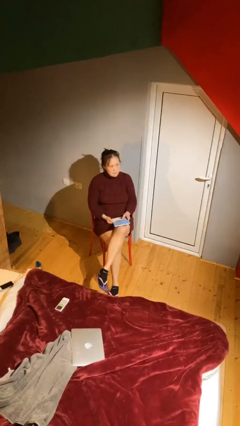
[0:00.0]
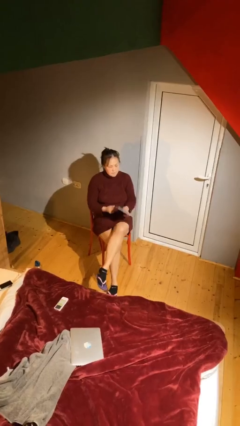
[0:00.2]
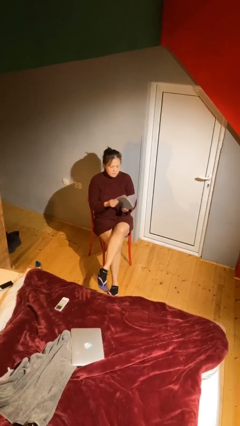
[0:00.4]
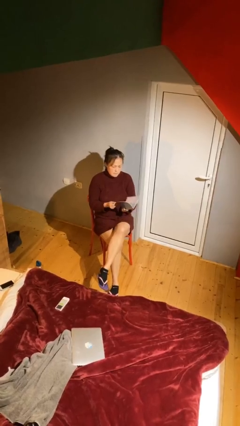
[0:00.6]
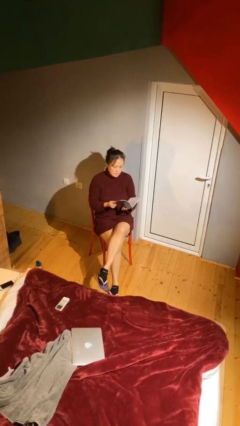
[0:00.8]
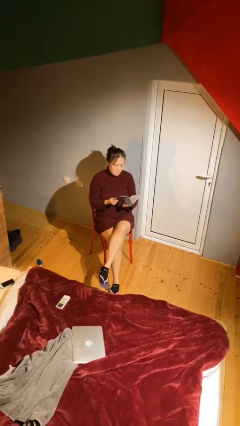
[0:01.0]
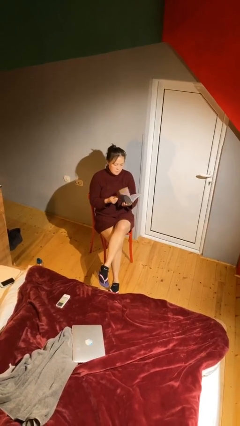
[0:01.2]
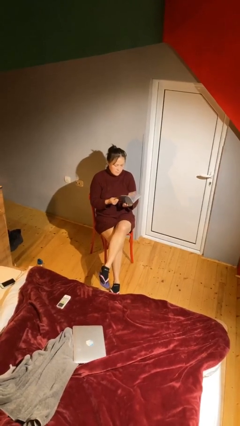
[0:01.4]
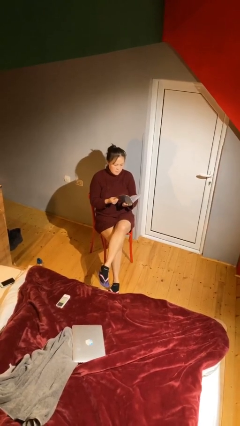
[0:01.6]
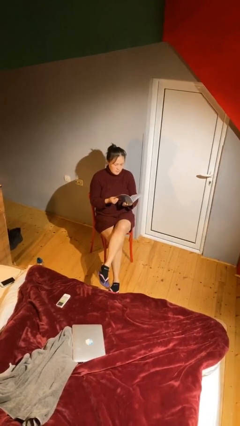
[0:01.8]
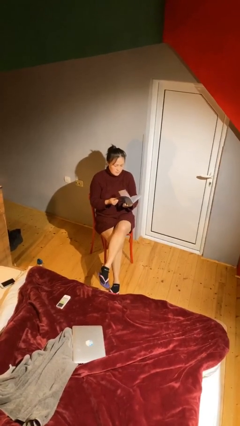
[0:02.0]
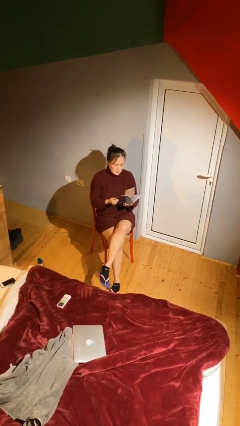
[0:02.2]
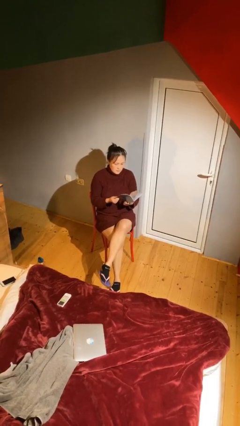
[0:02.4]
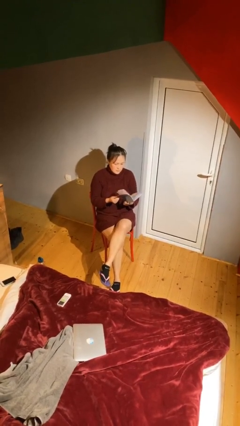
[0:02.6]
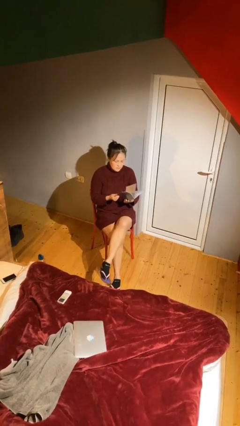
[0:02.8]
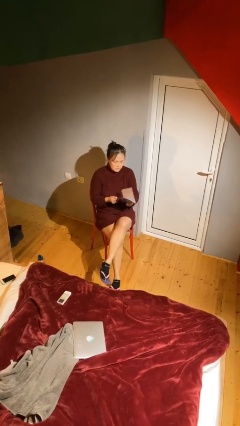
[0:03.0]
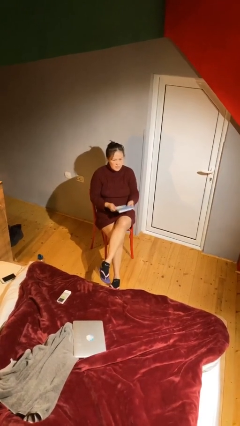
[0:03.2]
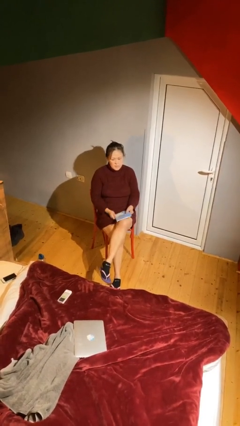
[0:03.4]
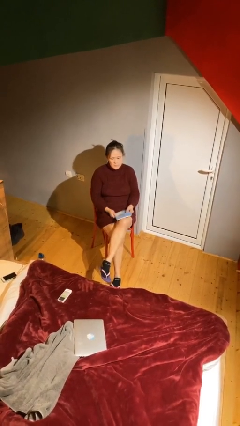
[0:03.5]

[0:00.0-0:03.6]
person reads document

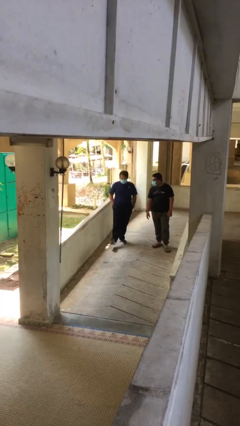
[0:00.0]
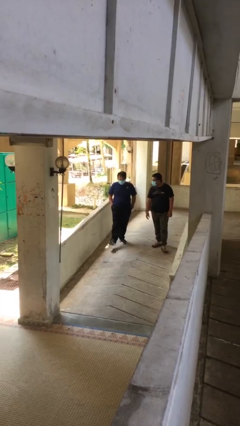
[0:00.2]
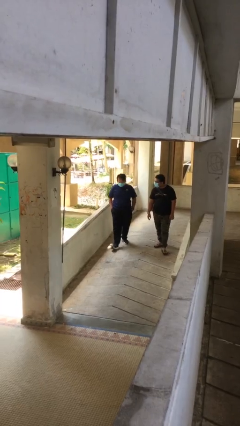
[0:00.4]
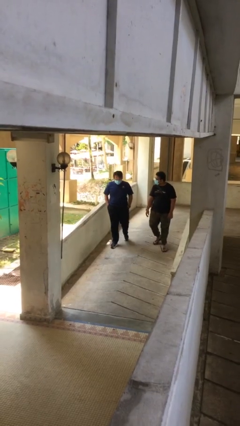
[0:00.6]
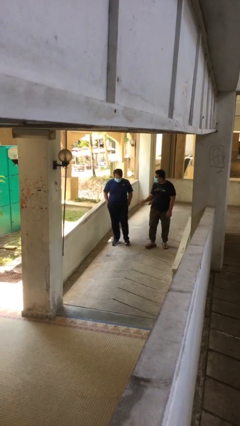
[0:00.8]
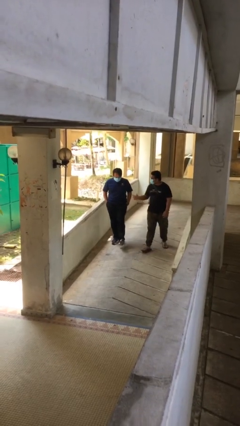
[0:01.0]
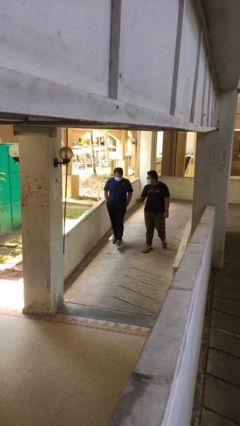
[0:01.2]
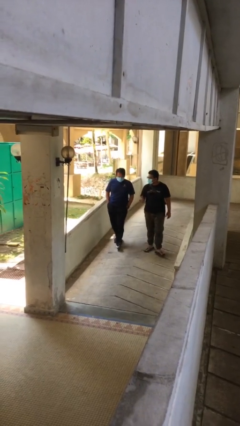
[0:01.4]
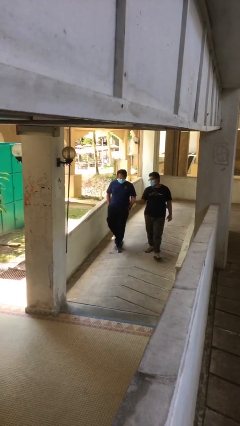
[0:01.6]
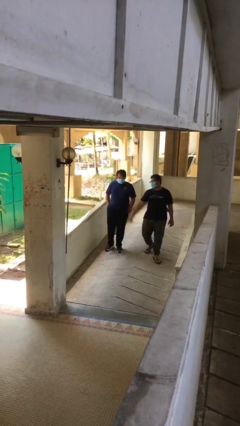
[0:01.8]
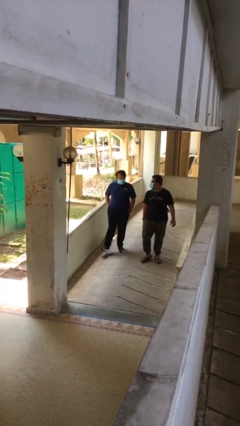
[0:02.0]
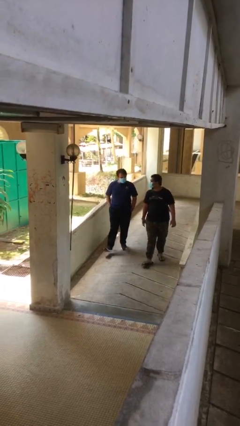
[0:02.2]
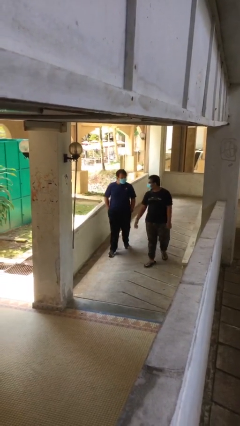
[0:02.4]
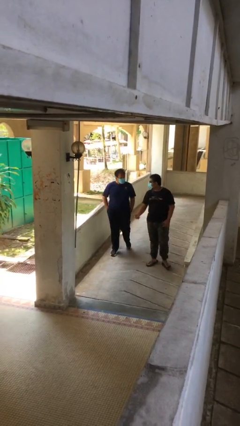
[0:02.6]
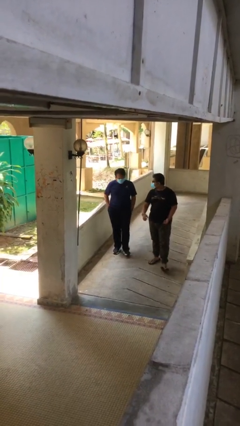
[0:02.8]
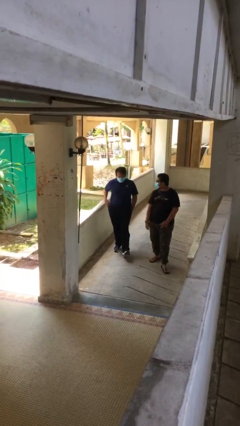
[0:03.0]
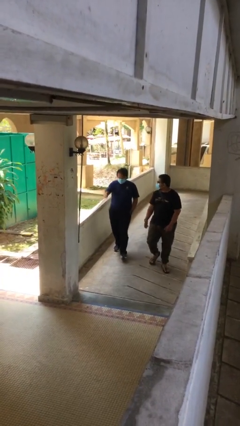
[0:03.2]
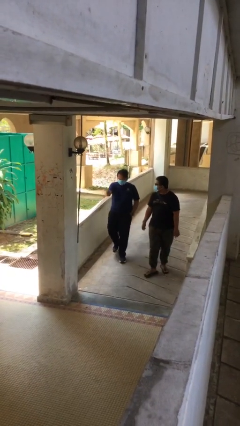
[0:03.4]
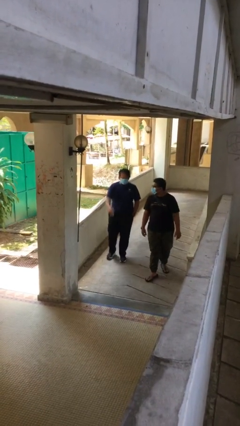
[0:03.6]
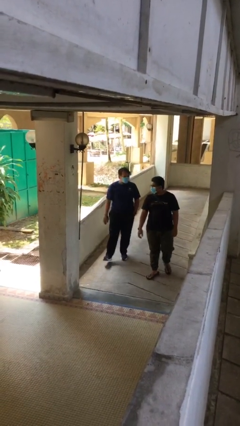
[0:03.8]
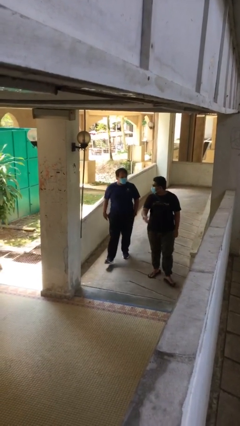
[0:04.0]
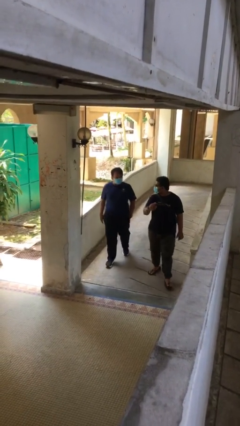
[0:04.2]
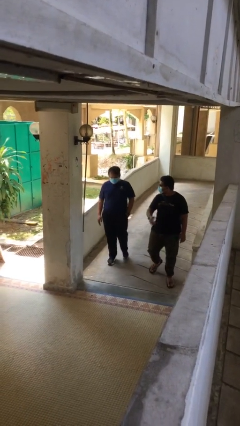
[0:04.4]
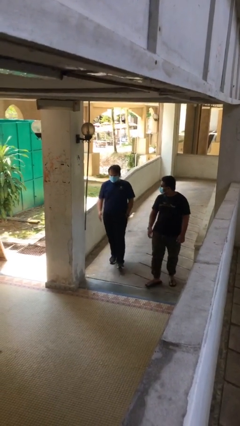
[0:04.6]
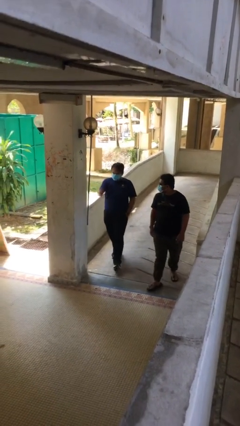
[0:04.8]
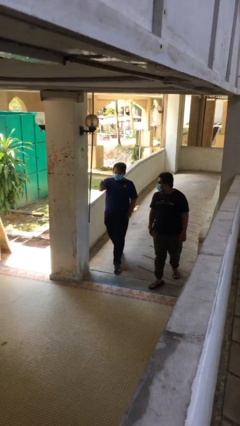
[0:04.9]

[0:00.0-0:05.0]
person talks to person

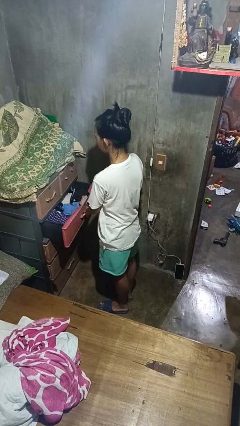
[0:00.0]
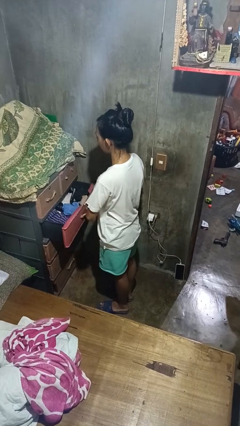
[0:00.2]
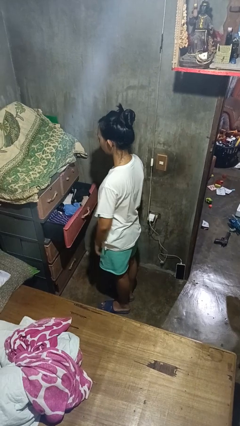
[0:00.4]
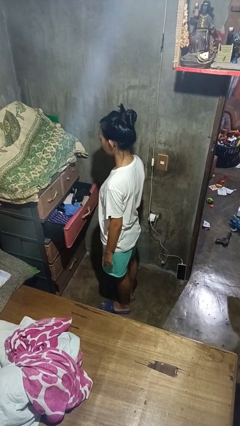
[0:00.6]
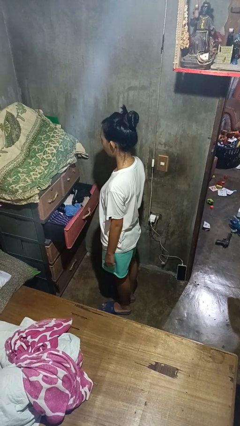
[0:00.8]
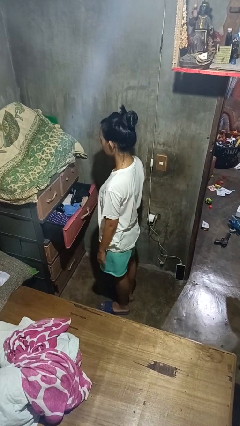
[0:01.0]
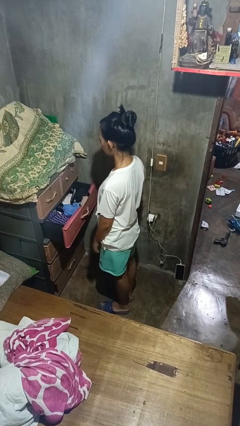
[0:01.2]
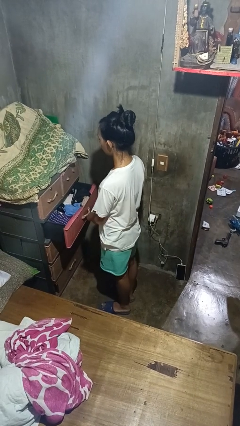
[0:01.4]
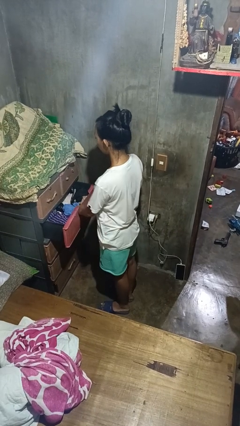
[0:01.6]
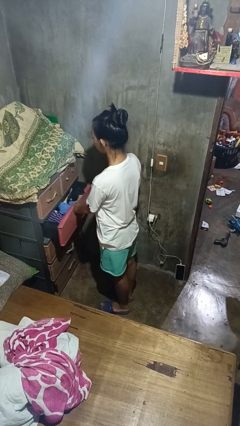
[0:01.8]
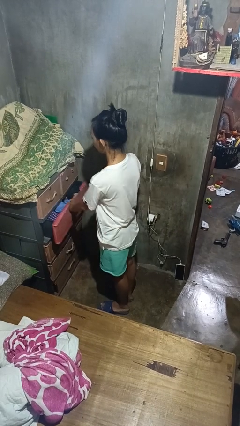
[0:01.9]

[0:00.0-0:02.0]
person opens dresser drawer

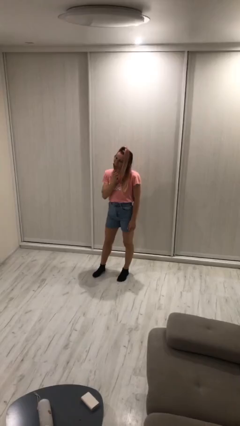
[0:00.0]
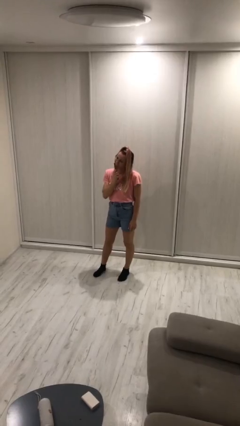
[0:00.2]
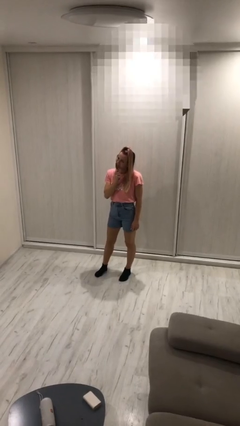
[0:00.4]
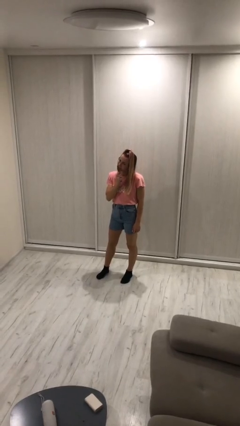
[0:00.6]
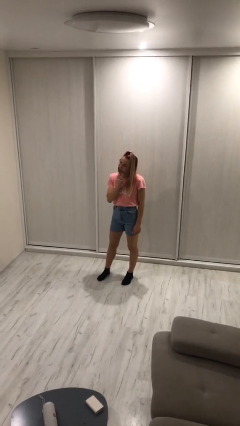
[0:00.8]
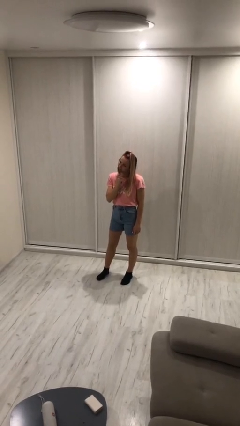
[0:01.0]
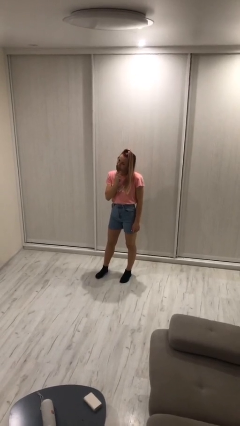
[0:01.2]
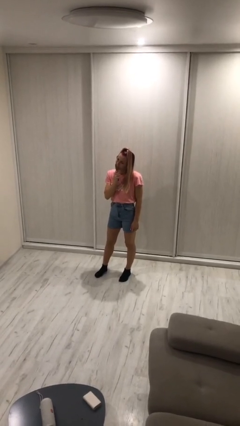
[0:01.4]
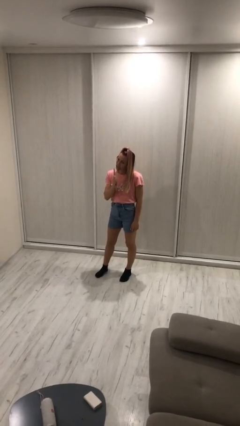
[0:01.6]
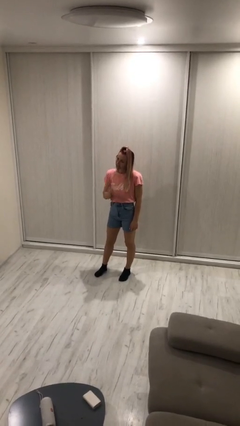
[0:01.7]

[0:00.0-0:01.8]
person brushes teeth

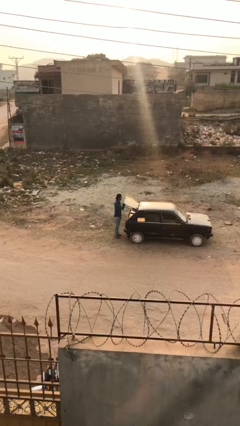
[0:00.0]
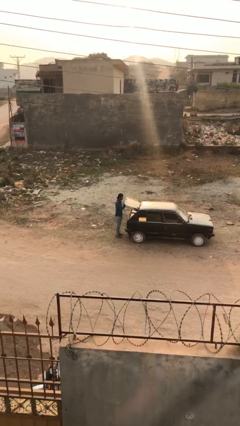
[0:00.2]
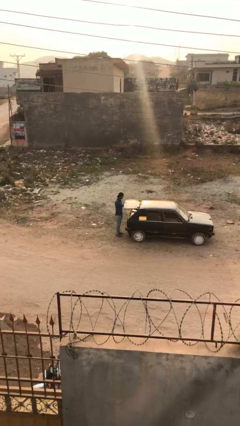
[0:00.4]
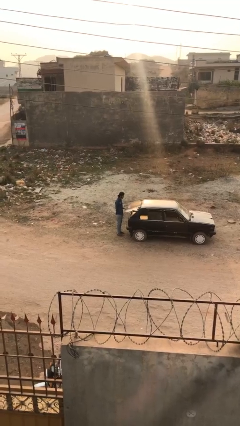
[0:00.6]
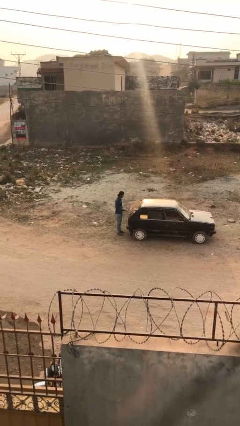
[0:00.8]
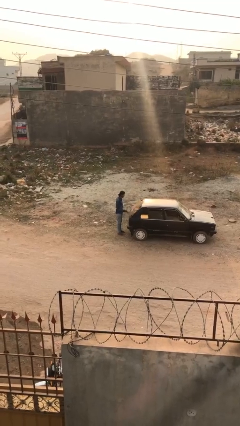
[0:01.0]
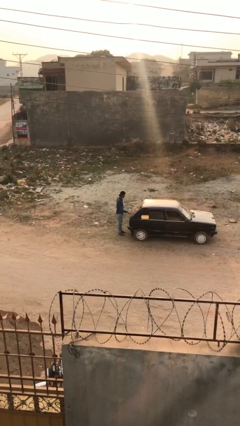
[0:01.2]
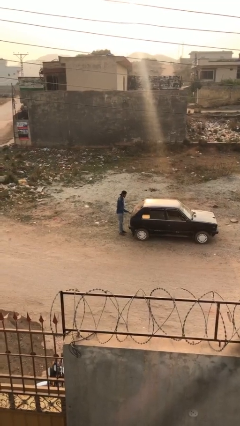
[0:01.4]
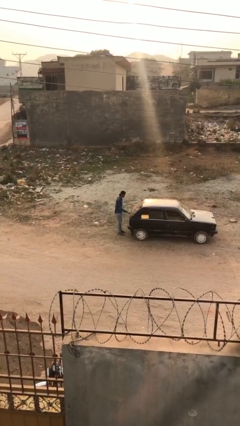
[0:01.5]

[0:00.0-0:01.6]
person closes car trunk

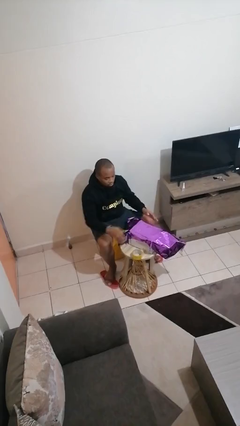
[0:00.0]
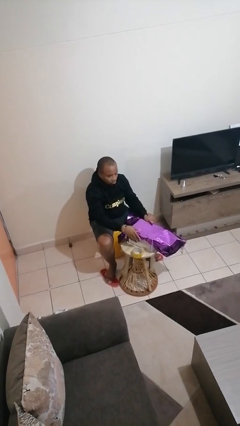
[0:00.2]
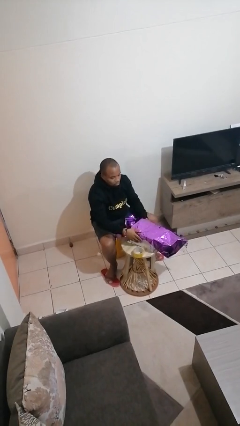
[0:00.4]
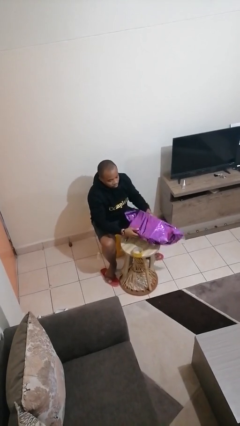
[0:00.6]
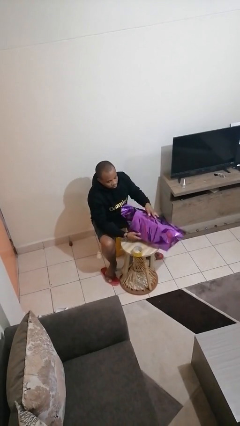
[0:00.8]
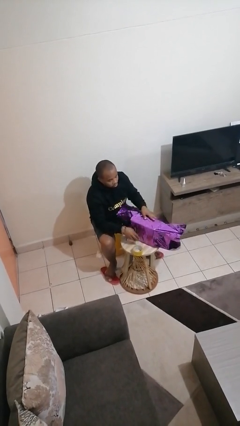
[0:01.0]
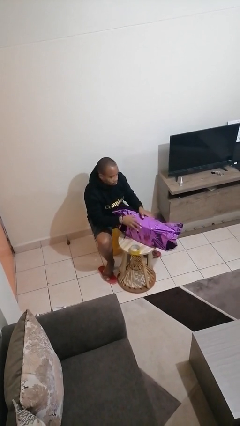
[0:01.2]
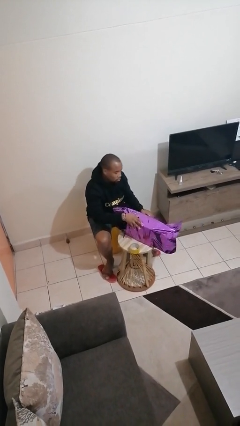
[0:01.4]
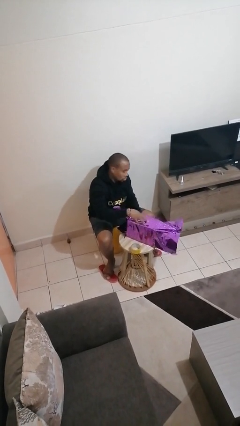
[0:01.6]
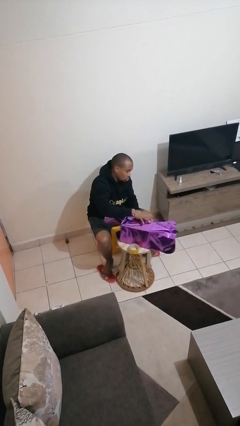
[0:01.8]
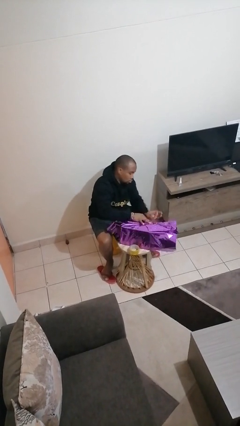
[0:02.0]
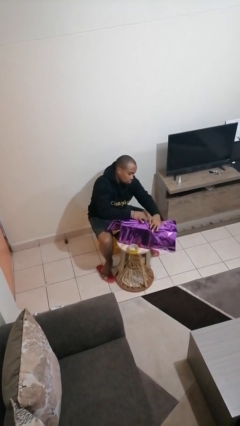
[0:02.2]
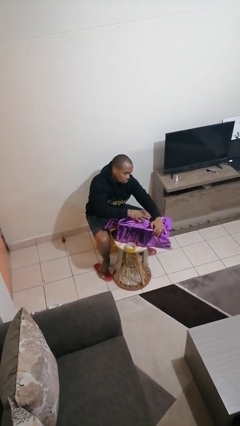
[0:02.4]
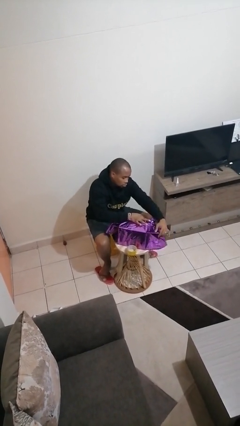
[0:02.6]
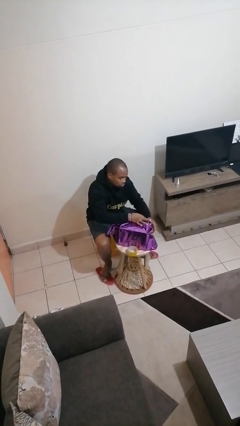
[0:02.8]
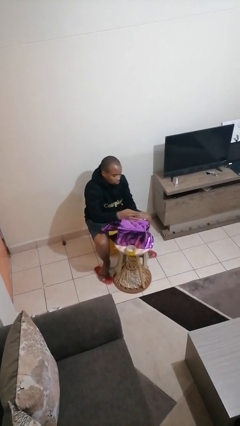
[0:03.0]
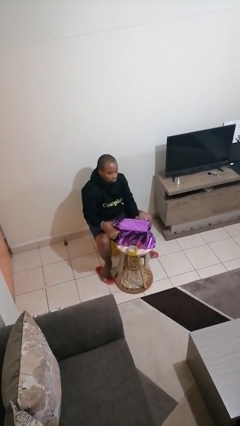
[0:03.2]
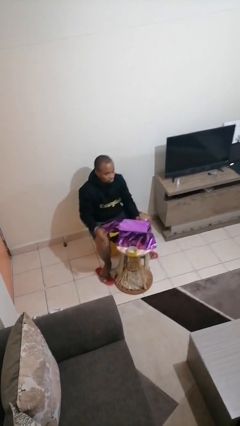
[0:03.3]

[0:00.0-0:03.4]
person wraps box

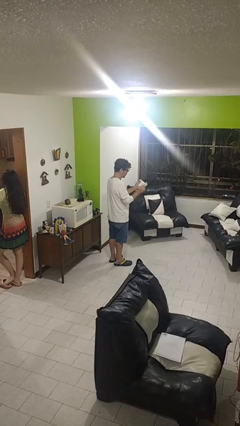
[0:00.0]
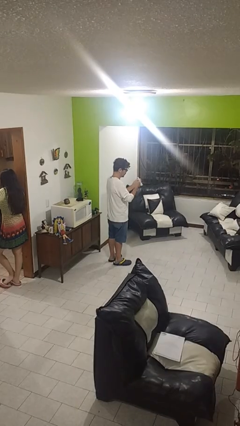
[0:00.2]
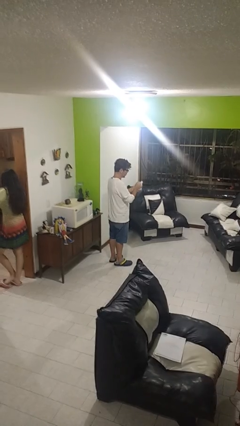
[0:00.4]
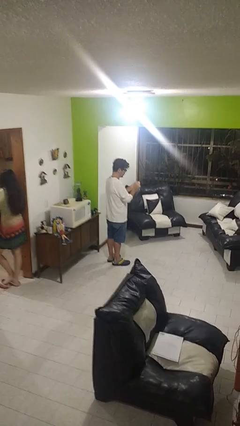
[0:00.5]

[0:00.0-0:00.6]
person crumples paper
